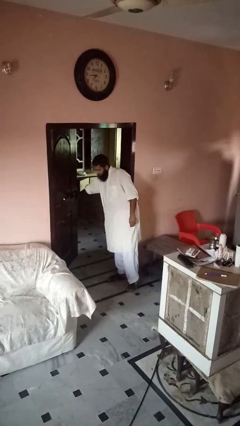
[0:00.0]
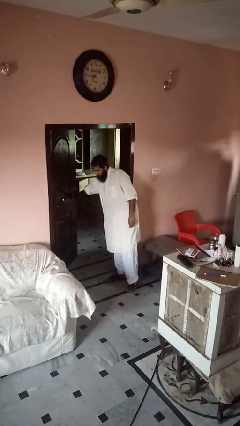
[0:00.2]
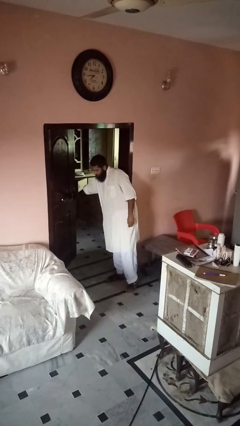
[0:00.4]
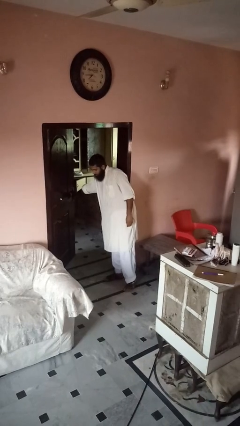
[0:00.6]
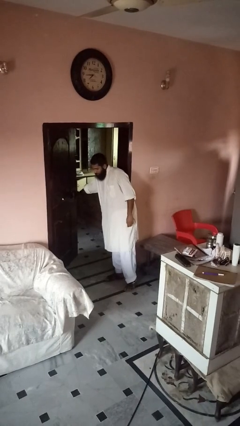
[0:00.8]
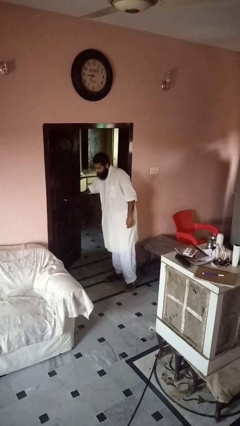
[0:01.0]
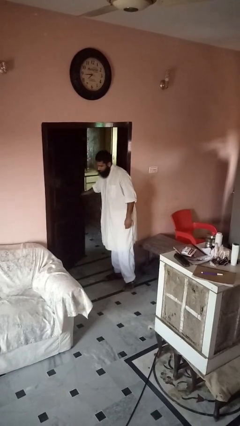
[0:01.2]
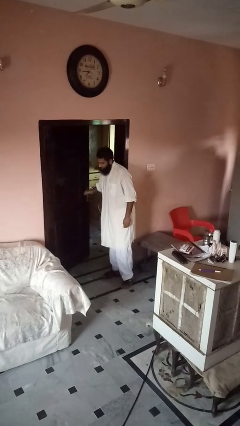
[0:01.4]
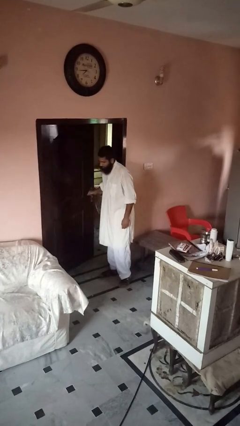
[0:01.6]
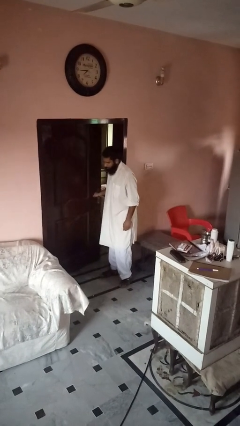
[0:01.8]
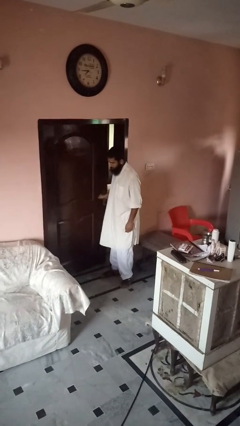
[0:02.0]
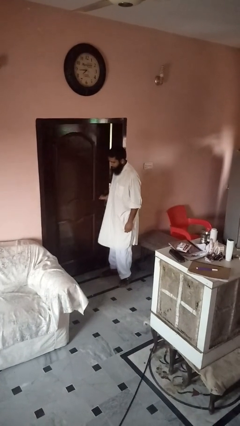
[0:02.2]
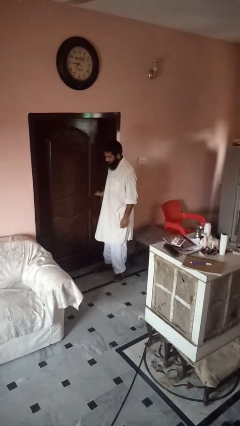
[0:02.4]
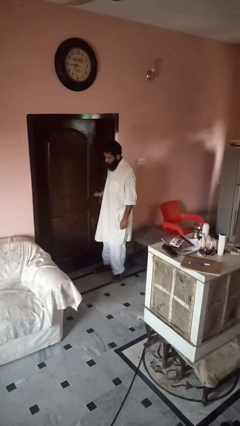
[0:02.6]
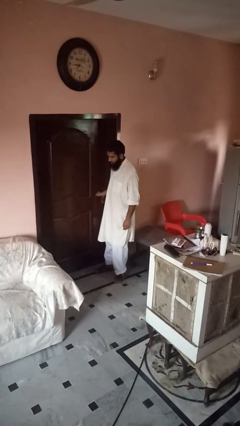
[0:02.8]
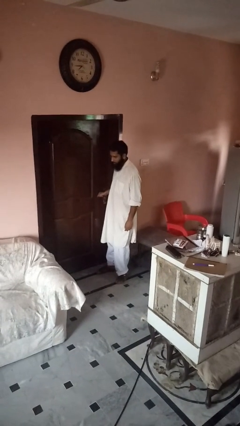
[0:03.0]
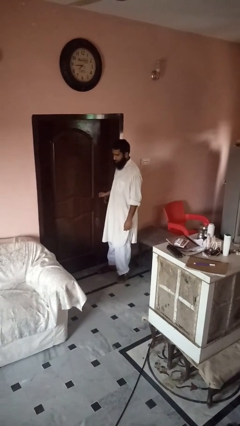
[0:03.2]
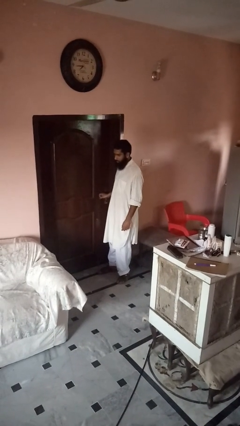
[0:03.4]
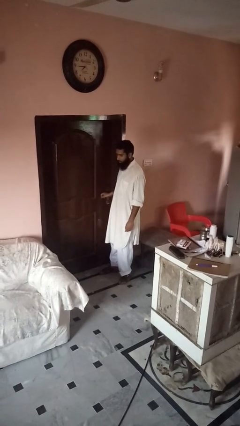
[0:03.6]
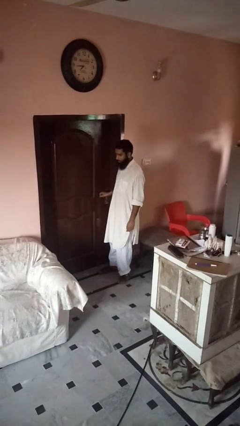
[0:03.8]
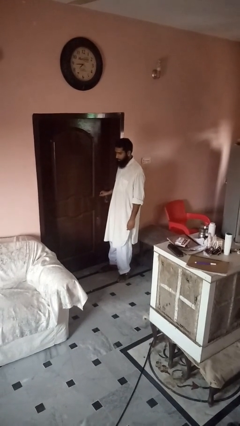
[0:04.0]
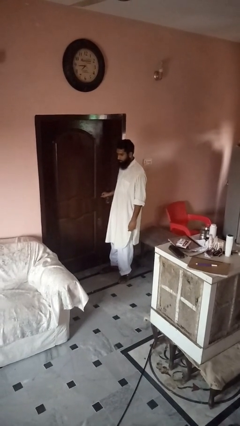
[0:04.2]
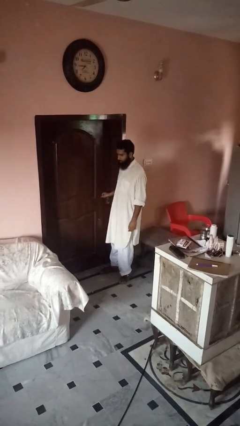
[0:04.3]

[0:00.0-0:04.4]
person closes gate

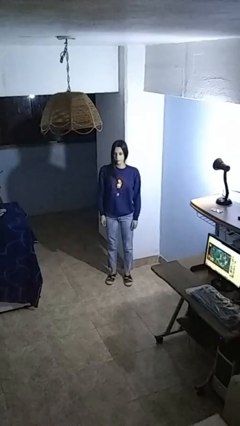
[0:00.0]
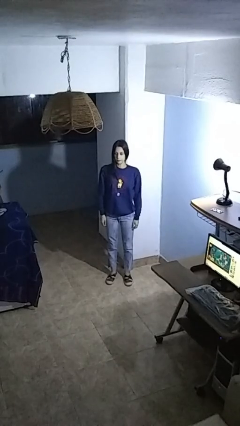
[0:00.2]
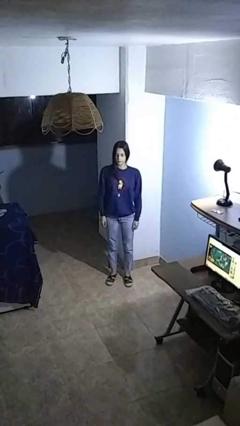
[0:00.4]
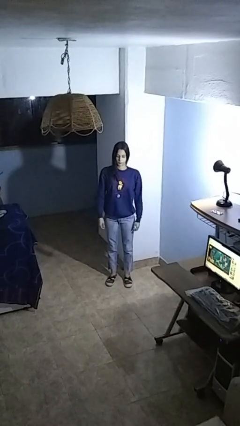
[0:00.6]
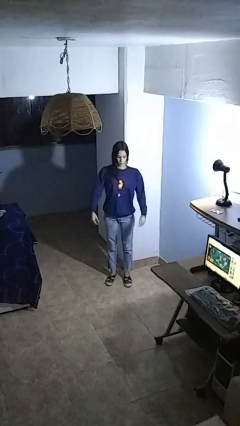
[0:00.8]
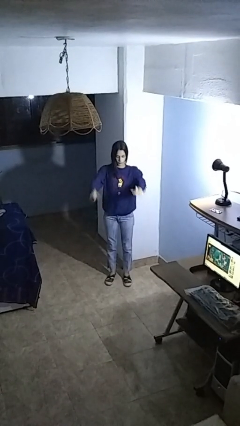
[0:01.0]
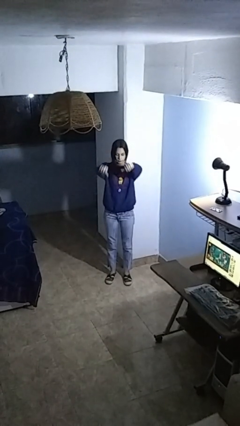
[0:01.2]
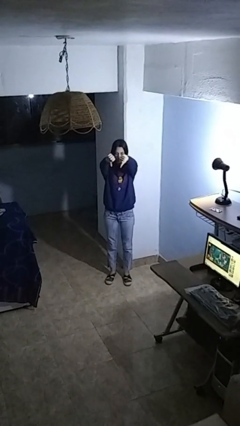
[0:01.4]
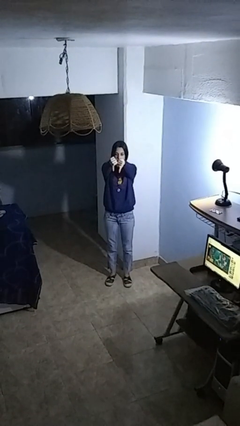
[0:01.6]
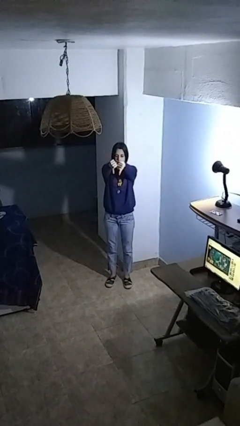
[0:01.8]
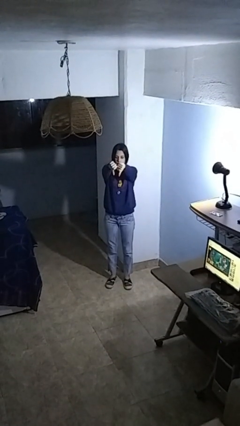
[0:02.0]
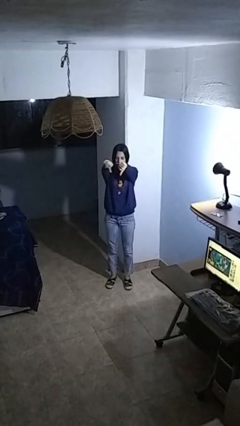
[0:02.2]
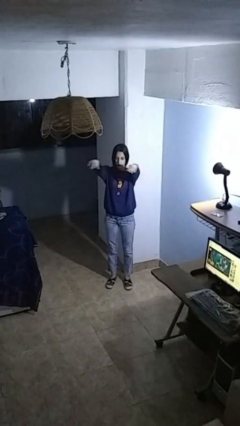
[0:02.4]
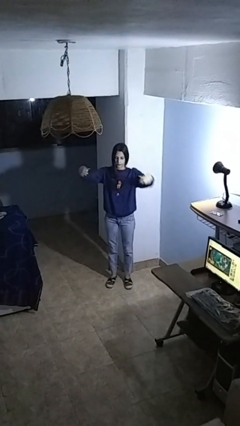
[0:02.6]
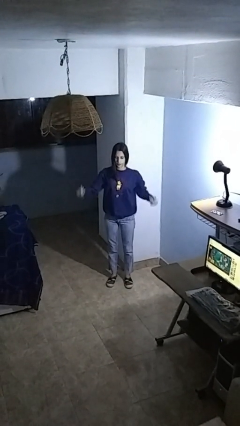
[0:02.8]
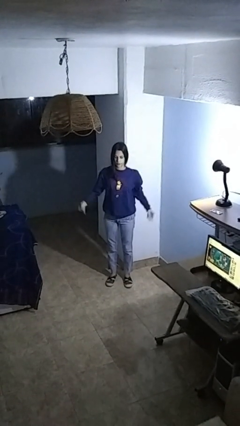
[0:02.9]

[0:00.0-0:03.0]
person gestures thumbs down

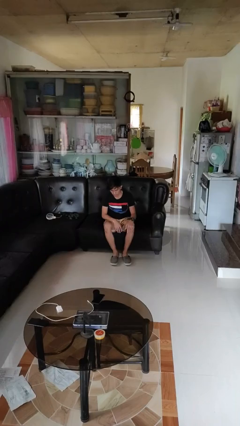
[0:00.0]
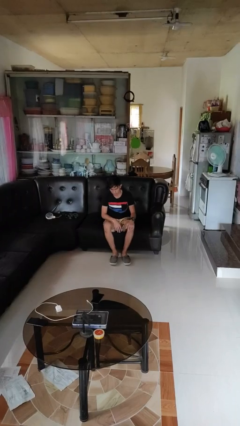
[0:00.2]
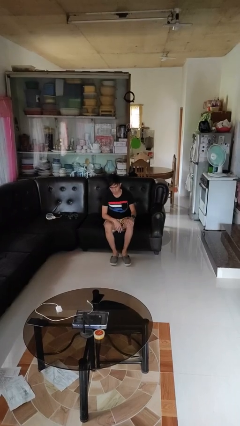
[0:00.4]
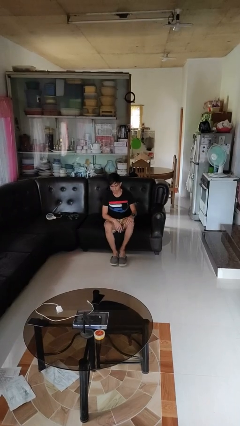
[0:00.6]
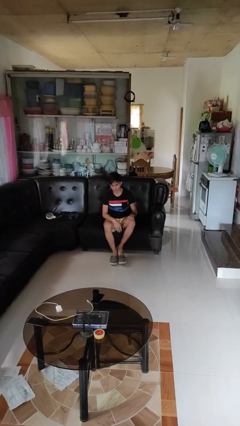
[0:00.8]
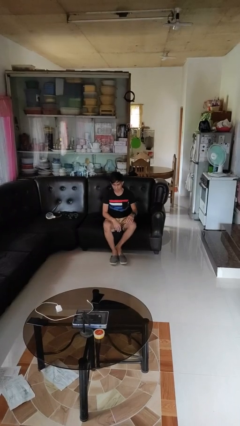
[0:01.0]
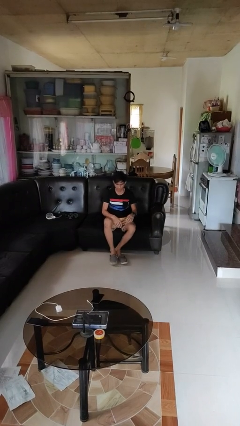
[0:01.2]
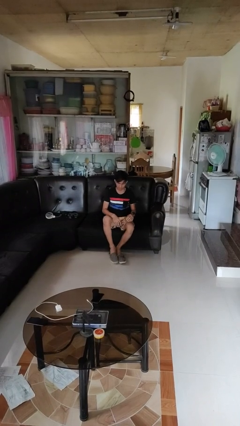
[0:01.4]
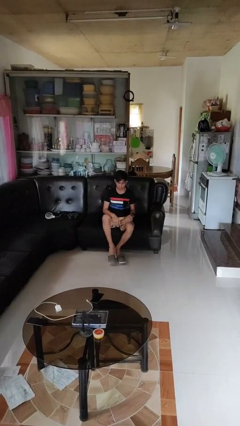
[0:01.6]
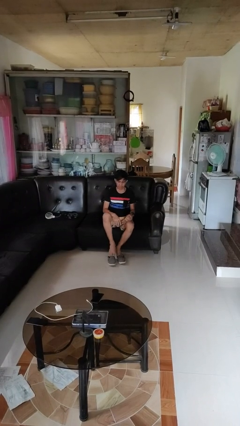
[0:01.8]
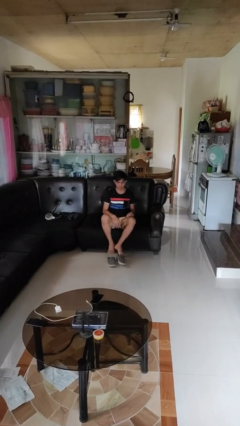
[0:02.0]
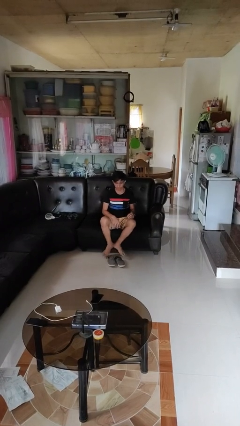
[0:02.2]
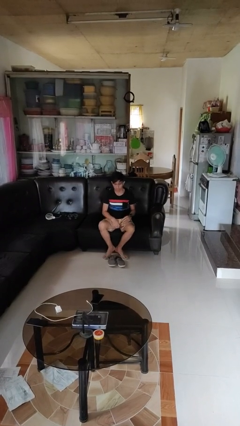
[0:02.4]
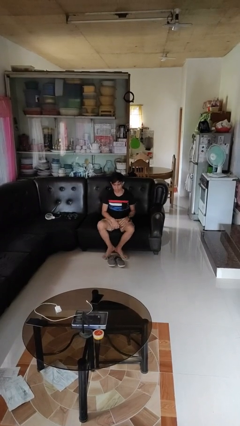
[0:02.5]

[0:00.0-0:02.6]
person takes off shoes

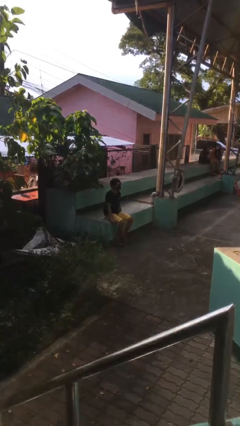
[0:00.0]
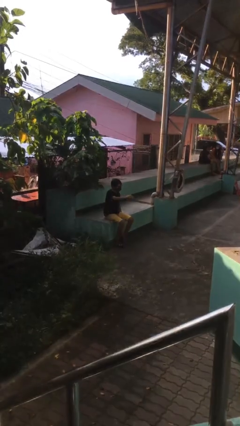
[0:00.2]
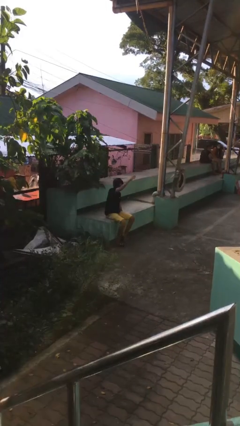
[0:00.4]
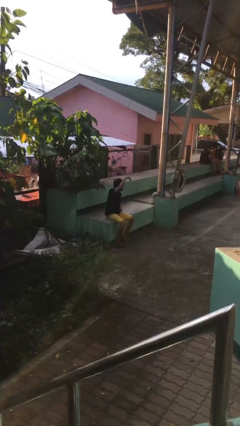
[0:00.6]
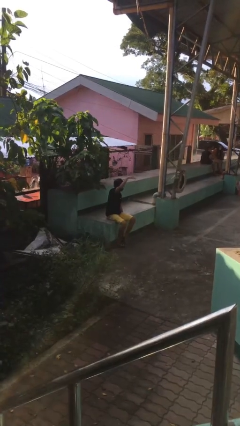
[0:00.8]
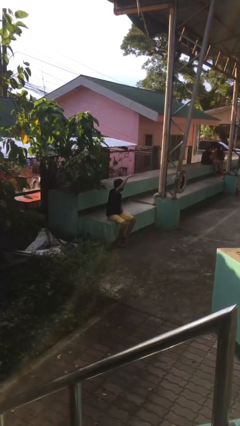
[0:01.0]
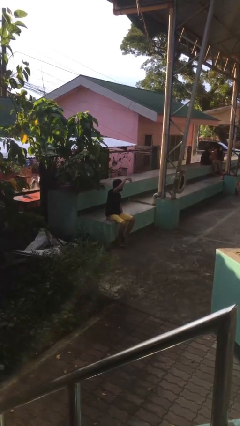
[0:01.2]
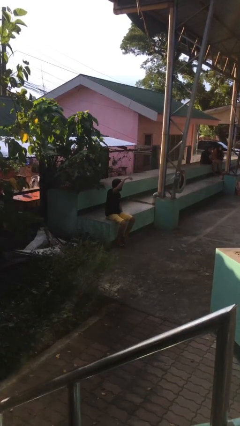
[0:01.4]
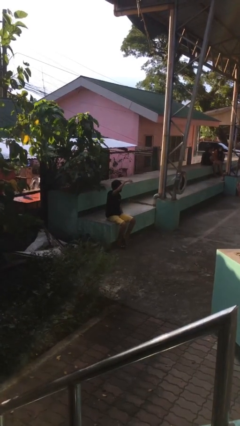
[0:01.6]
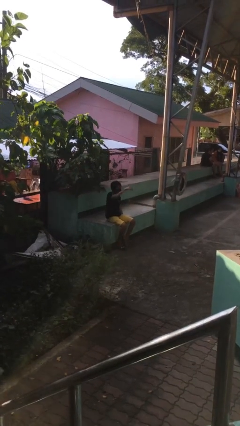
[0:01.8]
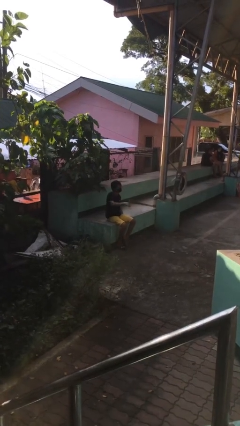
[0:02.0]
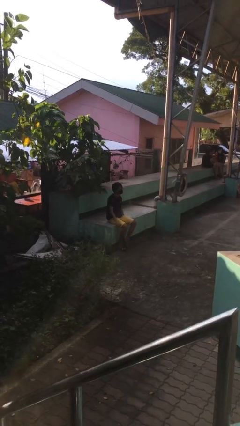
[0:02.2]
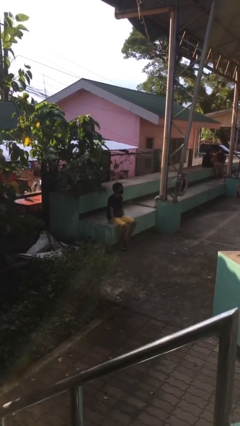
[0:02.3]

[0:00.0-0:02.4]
person gestures come here

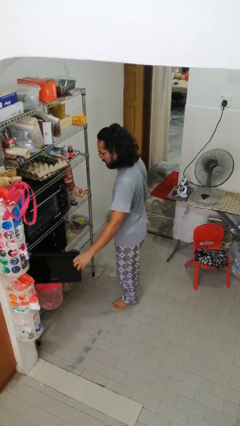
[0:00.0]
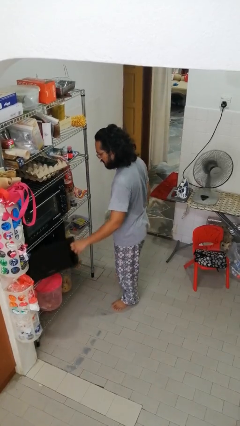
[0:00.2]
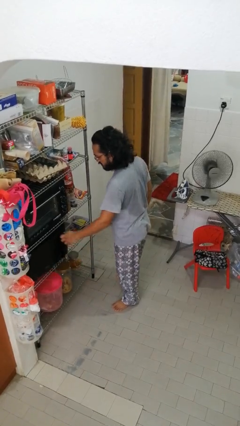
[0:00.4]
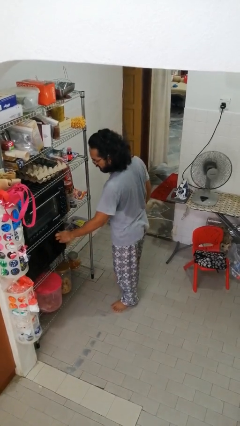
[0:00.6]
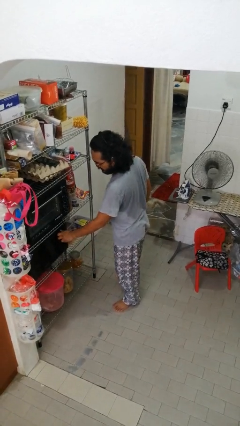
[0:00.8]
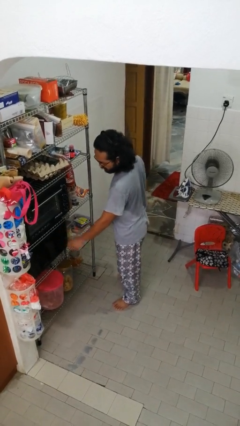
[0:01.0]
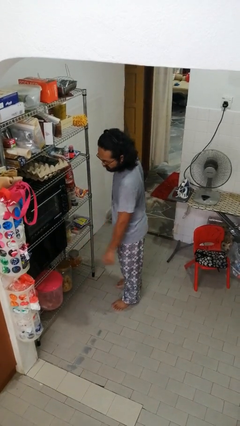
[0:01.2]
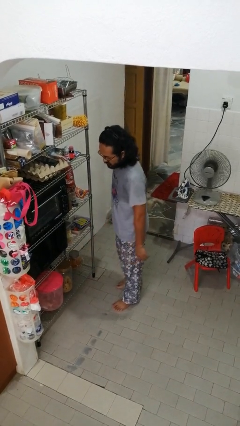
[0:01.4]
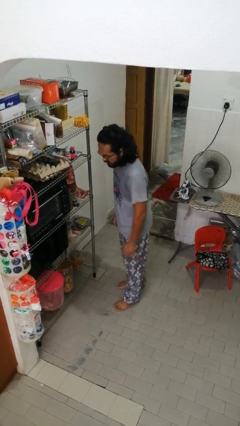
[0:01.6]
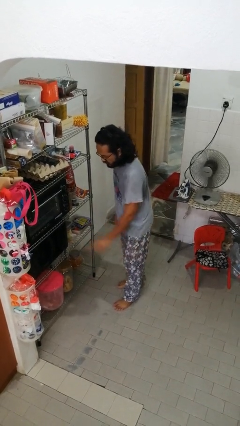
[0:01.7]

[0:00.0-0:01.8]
person closes microwave

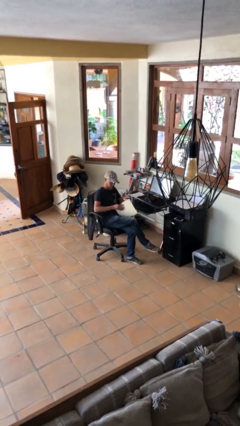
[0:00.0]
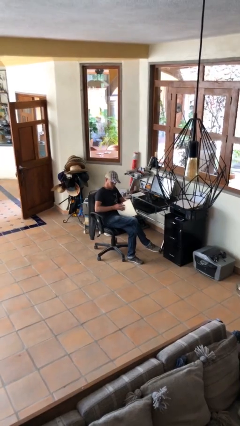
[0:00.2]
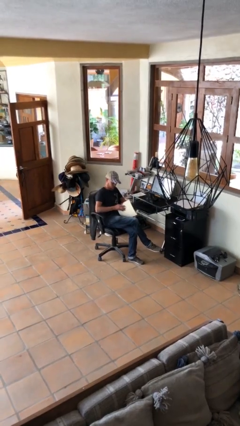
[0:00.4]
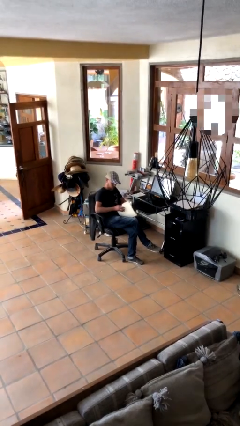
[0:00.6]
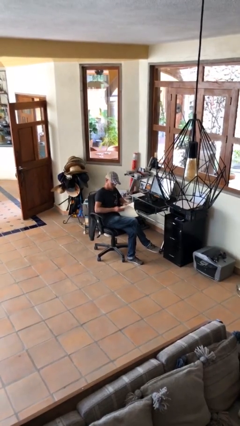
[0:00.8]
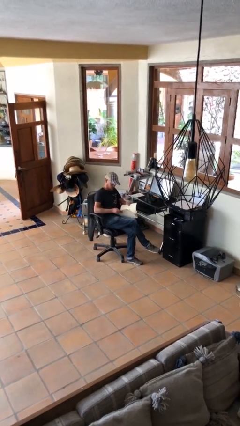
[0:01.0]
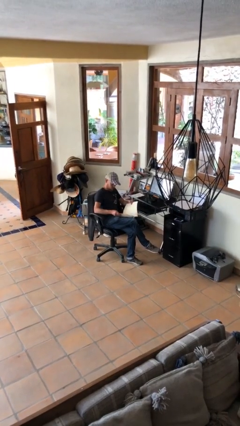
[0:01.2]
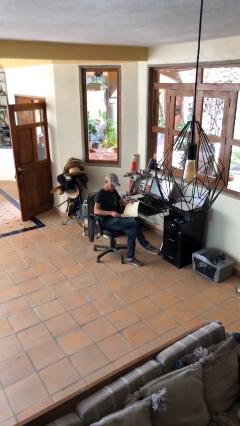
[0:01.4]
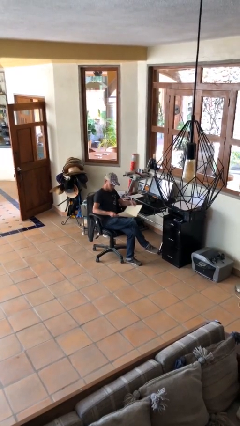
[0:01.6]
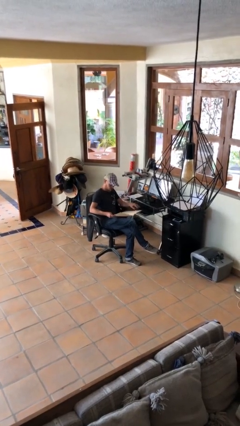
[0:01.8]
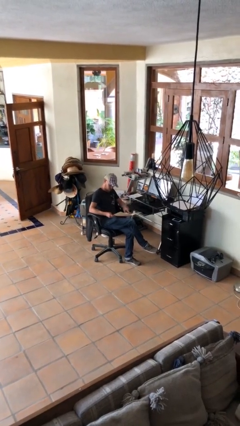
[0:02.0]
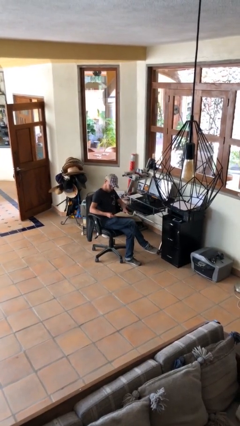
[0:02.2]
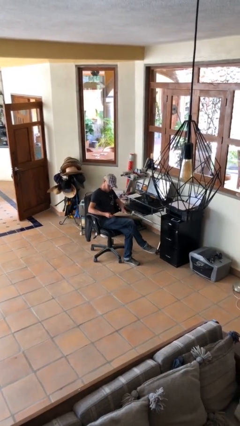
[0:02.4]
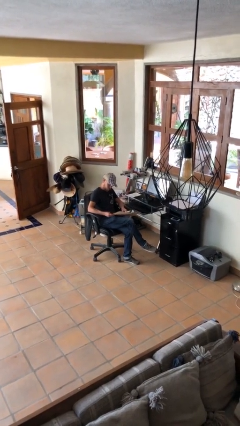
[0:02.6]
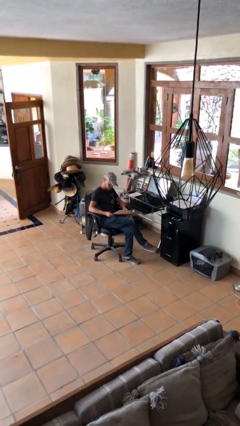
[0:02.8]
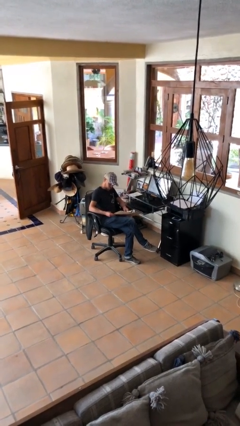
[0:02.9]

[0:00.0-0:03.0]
person reads document

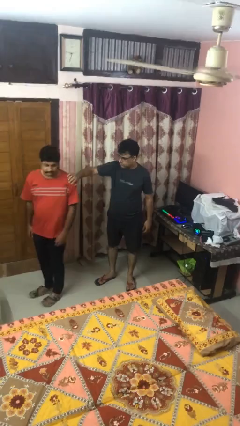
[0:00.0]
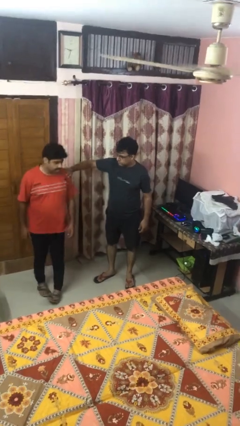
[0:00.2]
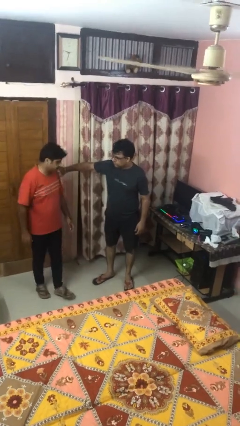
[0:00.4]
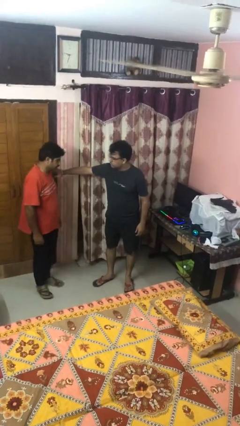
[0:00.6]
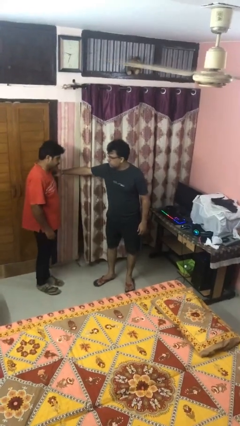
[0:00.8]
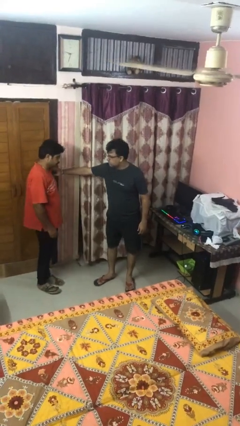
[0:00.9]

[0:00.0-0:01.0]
person spins person around
